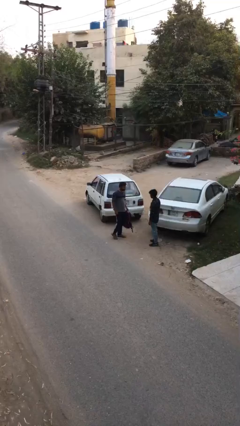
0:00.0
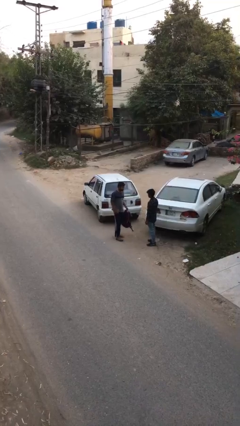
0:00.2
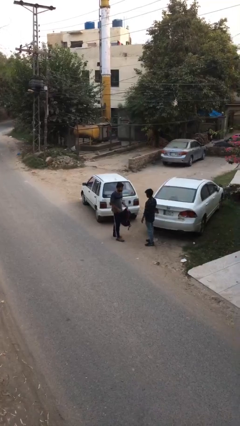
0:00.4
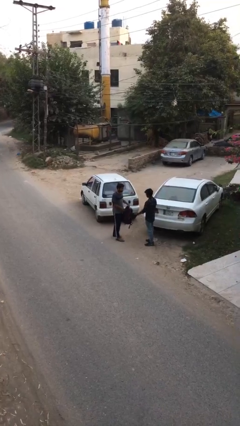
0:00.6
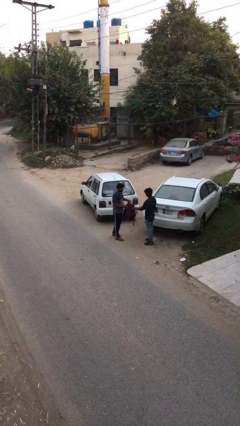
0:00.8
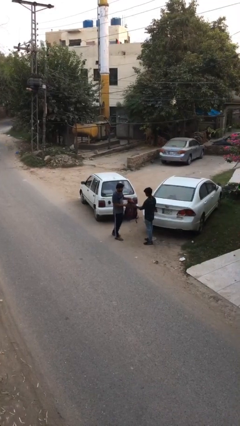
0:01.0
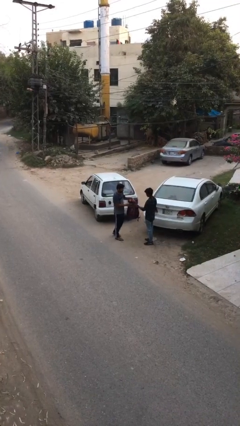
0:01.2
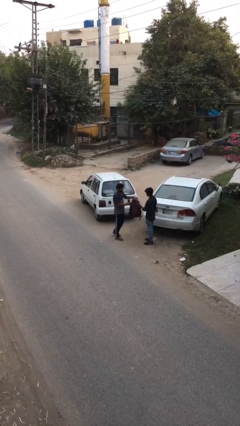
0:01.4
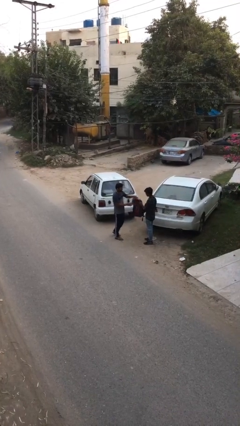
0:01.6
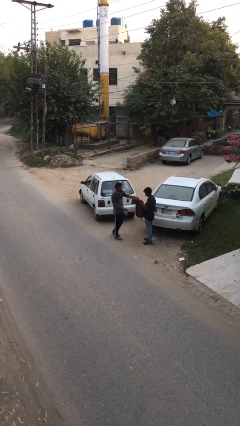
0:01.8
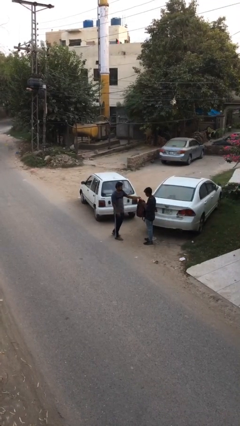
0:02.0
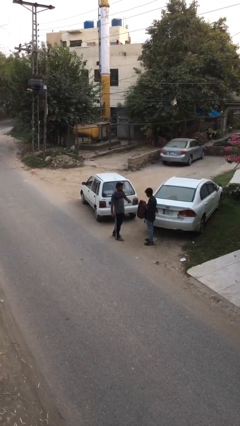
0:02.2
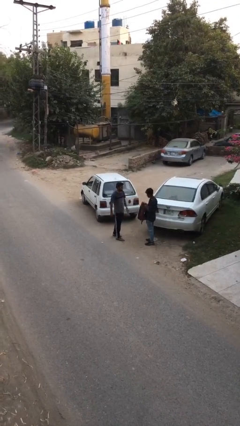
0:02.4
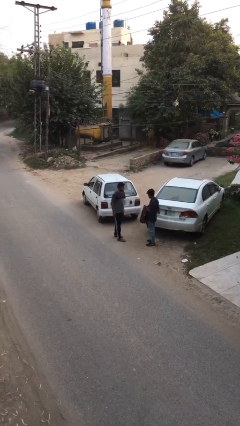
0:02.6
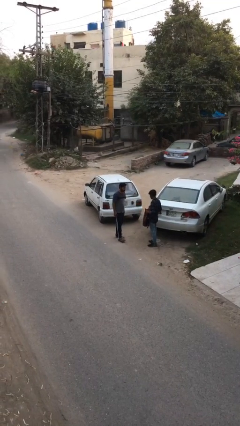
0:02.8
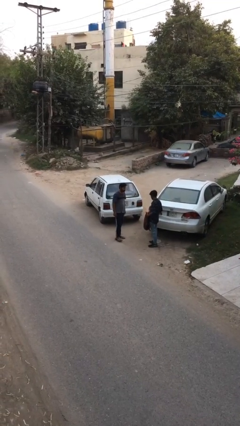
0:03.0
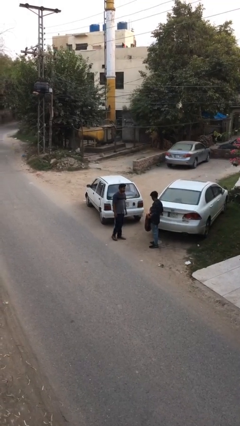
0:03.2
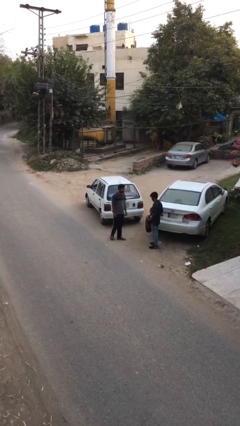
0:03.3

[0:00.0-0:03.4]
person transfers object to person

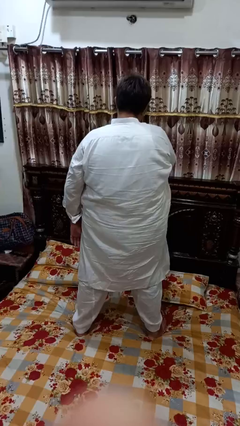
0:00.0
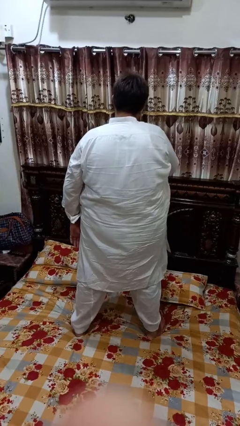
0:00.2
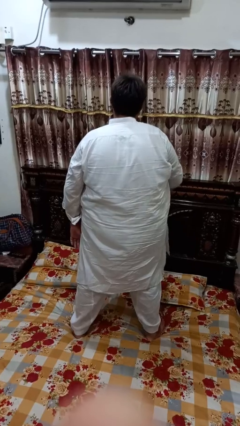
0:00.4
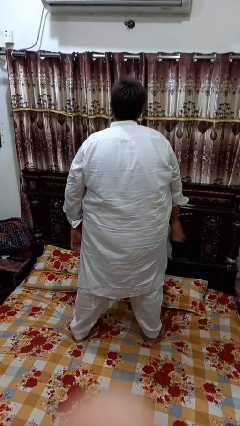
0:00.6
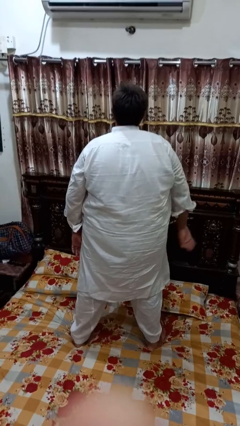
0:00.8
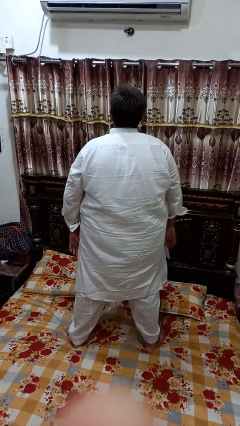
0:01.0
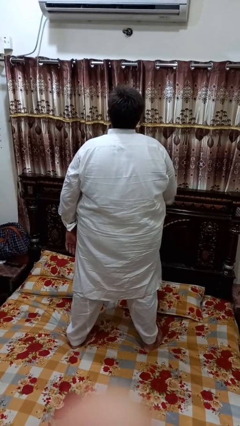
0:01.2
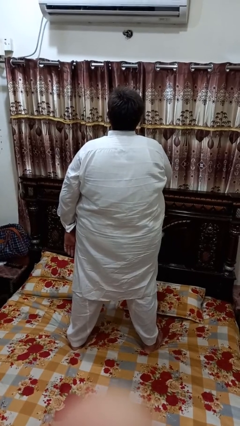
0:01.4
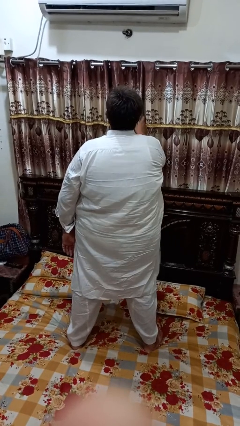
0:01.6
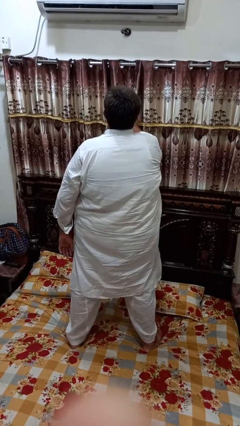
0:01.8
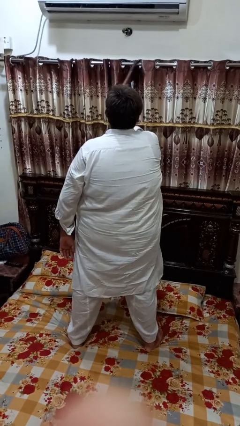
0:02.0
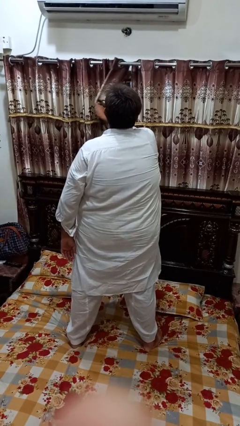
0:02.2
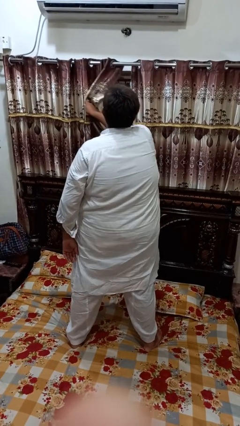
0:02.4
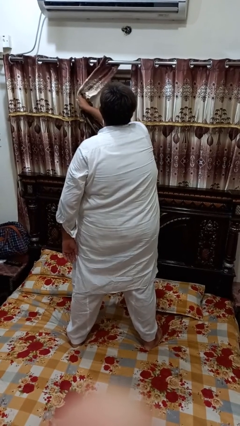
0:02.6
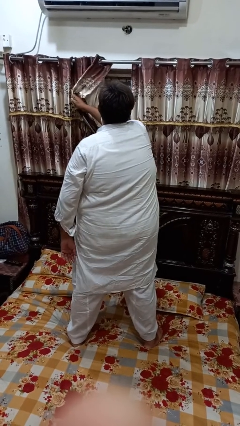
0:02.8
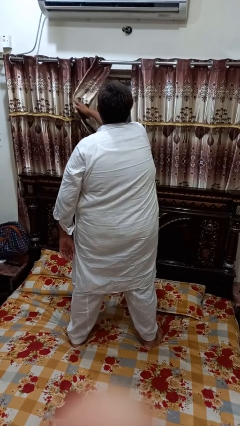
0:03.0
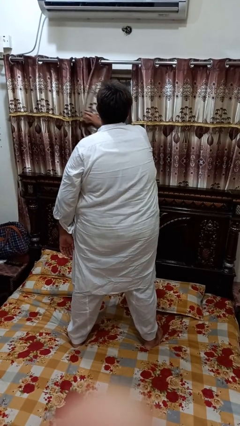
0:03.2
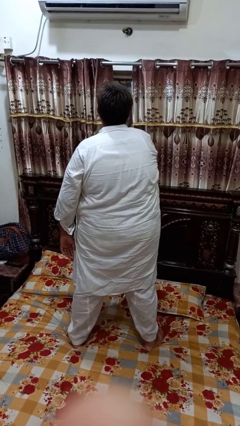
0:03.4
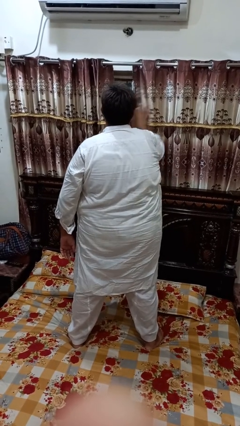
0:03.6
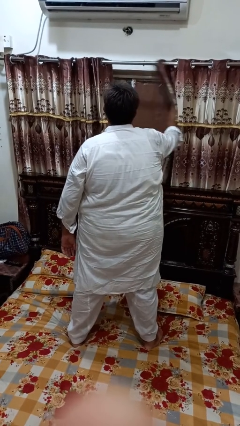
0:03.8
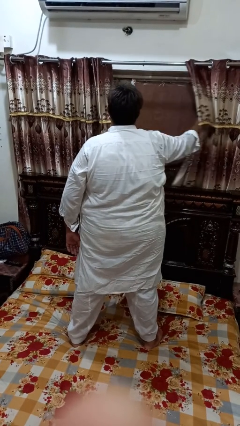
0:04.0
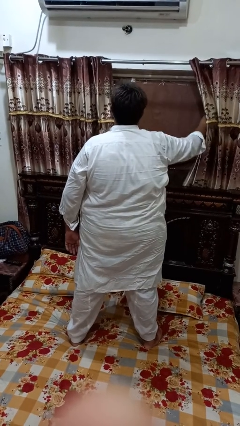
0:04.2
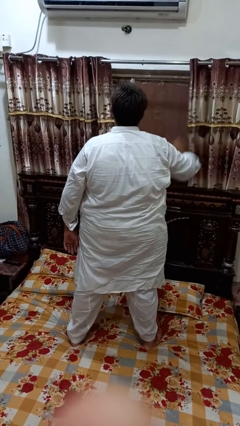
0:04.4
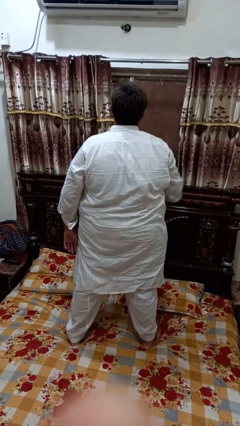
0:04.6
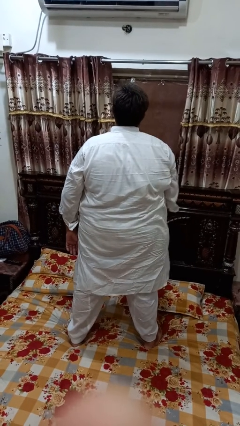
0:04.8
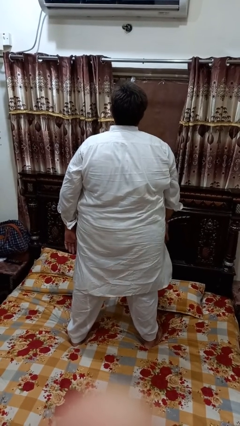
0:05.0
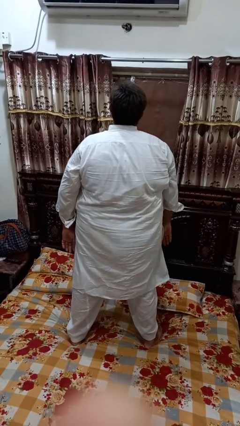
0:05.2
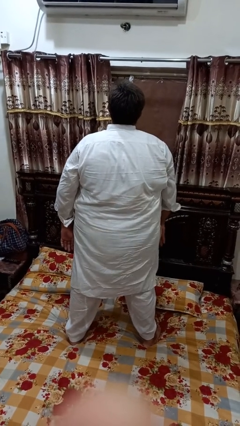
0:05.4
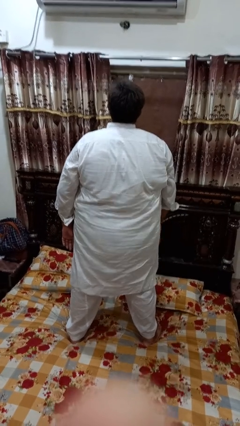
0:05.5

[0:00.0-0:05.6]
person opens curtains

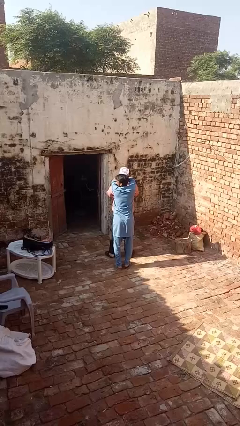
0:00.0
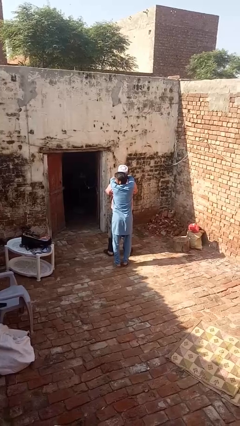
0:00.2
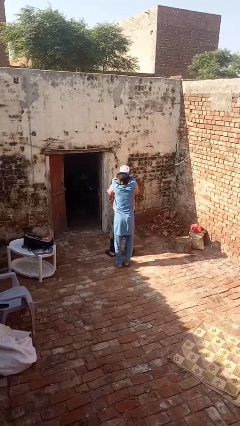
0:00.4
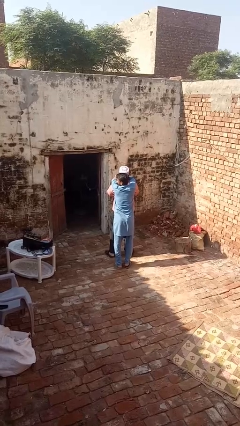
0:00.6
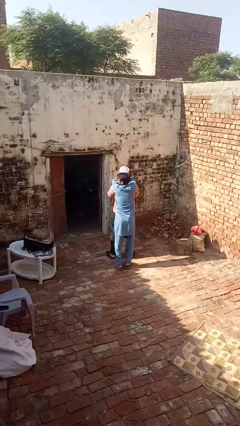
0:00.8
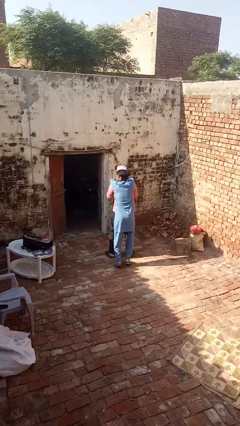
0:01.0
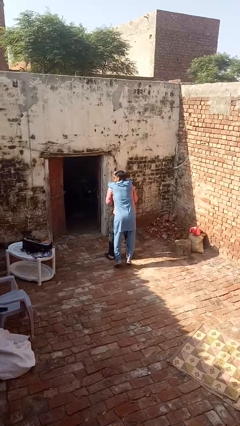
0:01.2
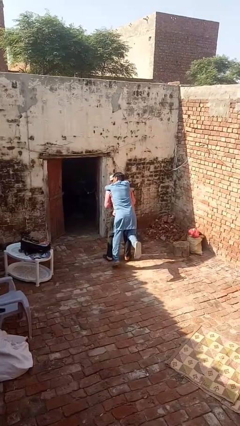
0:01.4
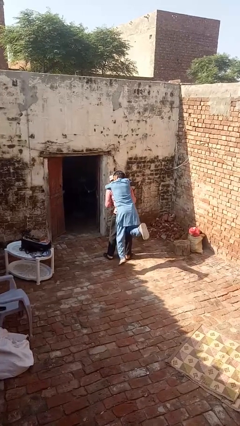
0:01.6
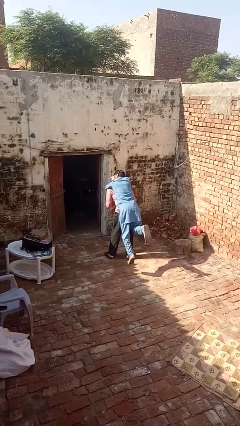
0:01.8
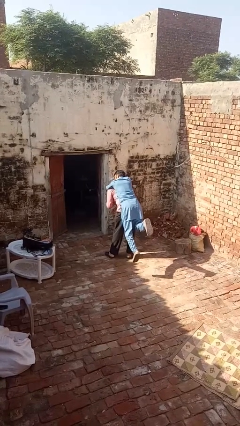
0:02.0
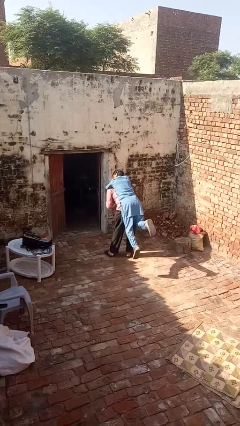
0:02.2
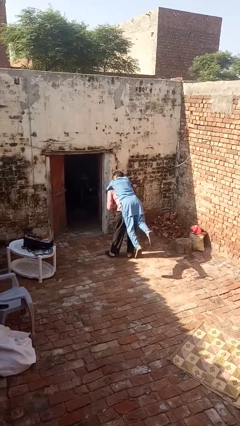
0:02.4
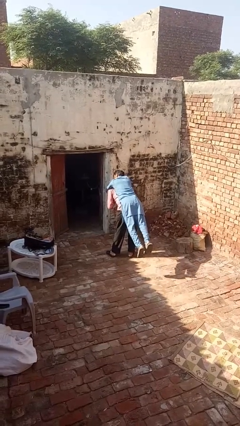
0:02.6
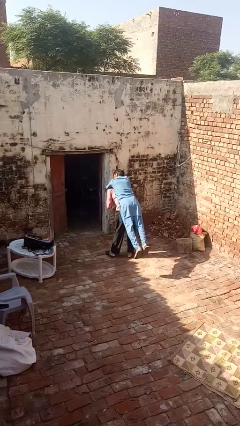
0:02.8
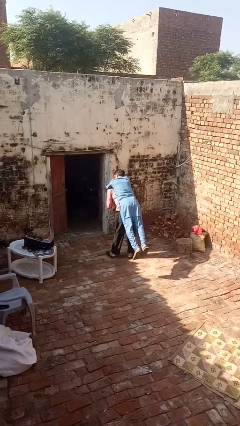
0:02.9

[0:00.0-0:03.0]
person carries person over shoulder

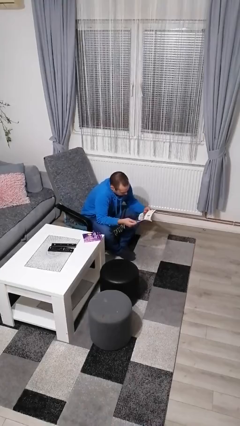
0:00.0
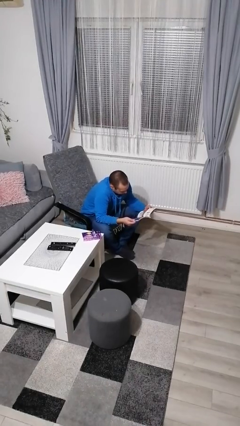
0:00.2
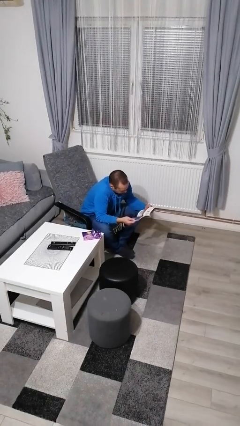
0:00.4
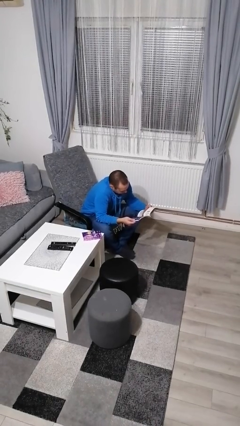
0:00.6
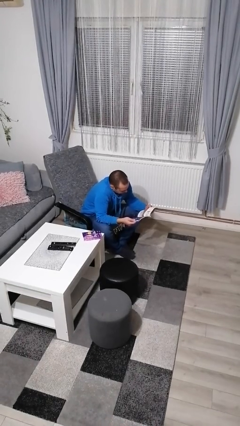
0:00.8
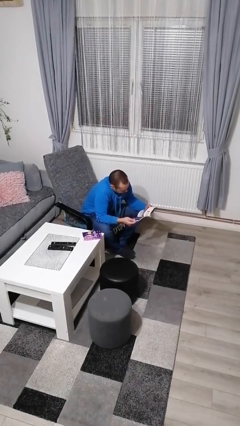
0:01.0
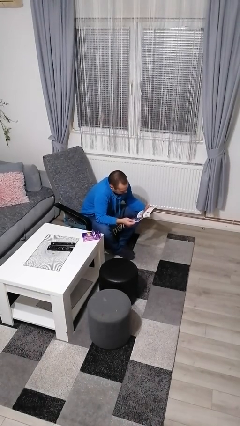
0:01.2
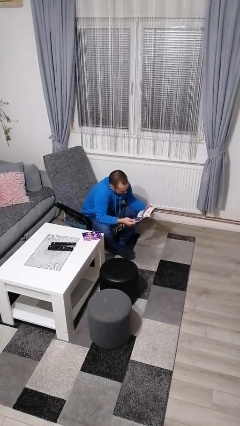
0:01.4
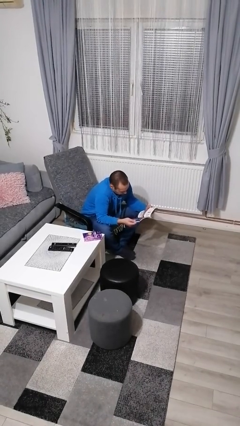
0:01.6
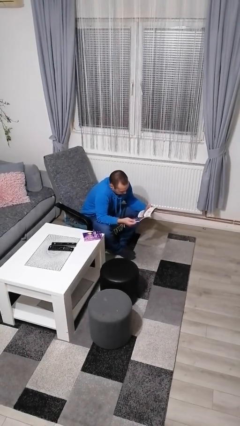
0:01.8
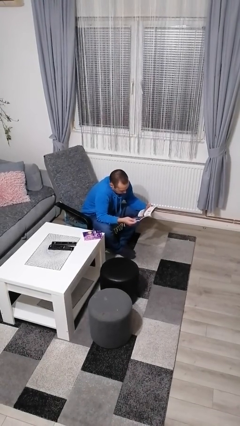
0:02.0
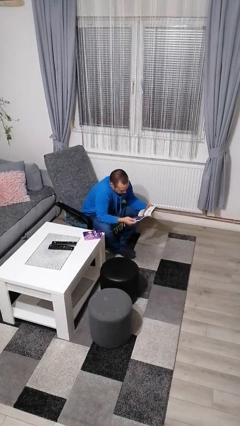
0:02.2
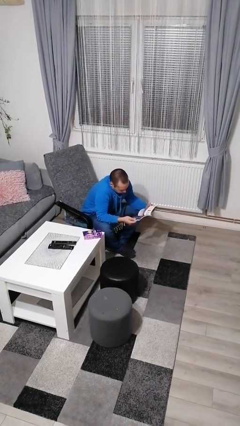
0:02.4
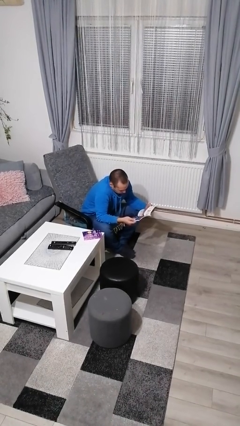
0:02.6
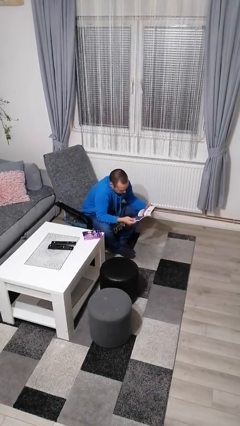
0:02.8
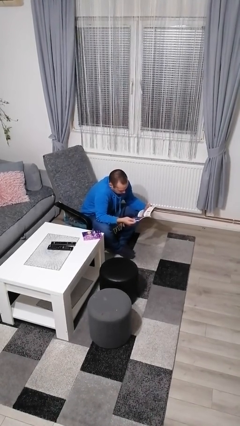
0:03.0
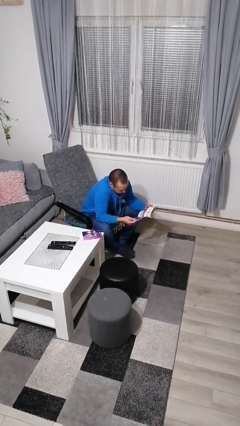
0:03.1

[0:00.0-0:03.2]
person reads magazine

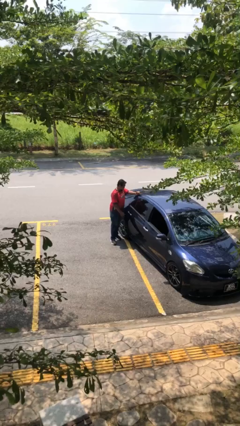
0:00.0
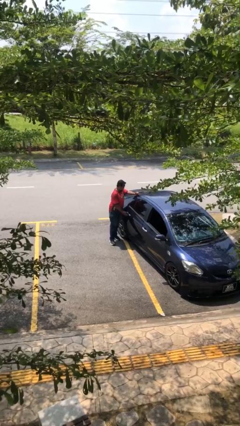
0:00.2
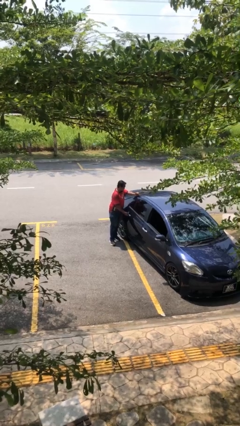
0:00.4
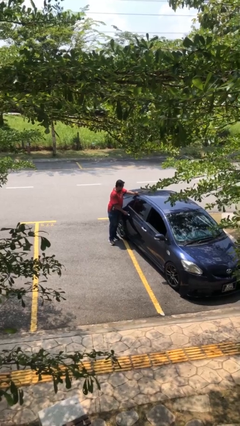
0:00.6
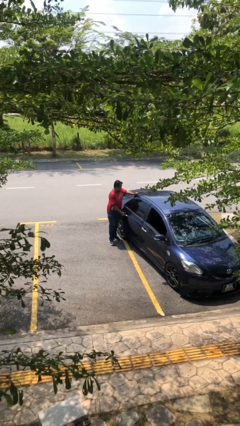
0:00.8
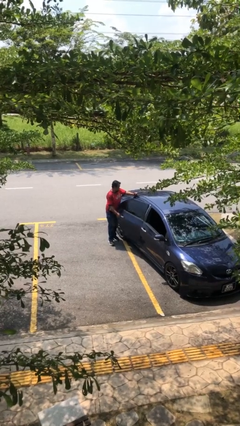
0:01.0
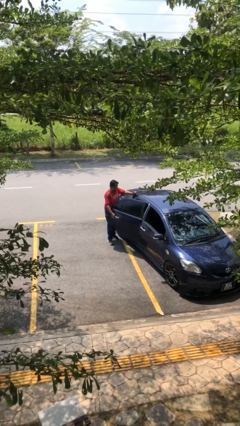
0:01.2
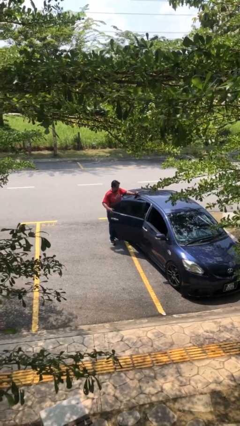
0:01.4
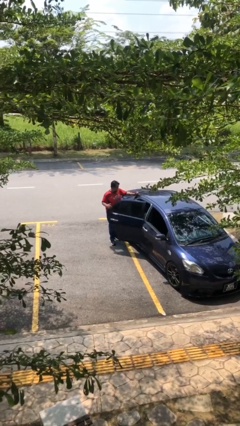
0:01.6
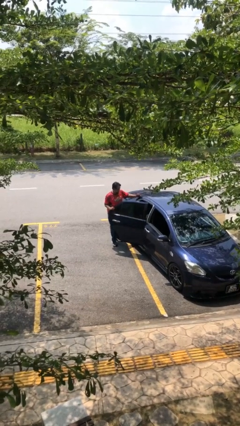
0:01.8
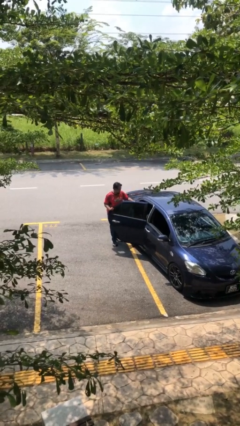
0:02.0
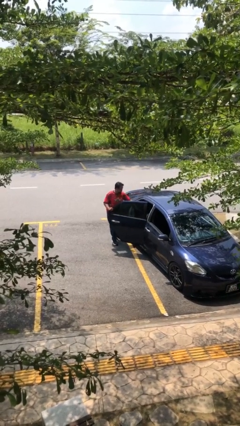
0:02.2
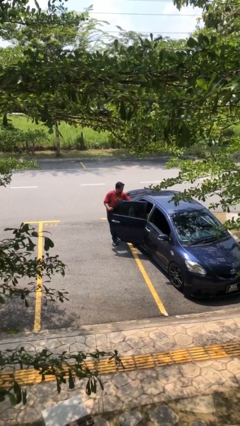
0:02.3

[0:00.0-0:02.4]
person opens car door

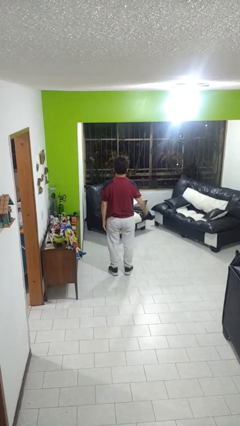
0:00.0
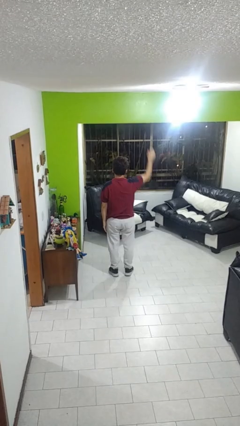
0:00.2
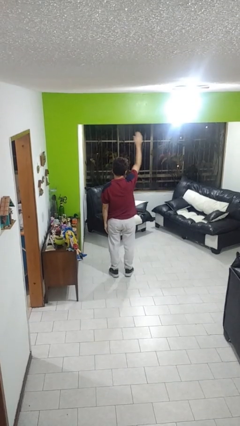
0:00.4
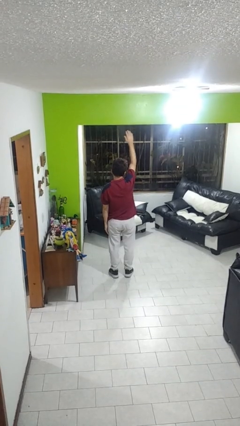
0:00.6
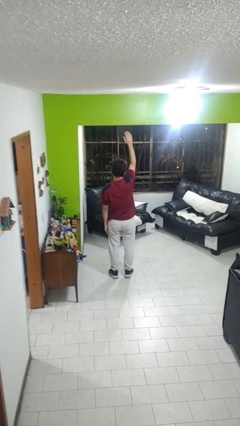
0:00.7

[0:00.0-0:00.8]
person gestures raise hand
